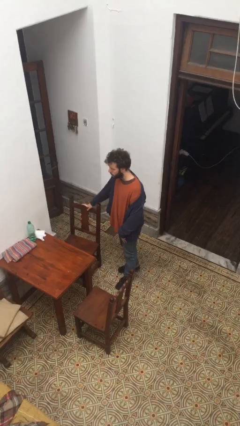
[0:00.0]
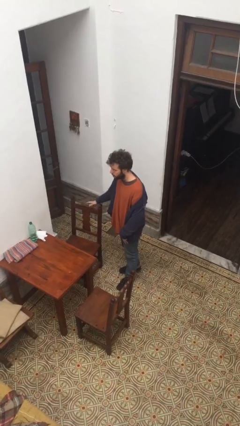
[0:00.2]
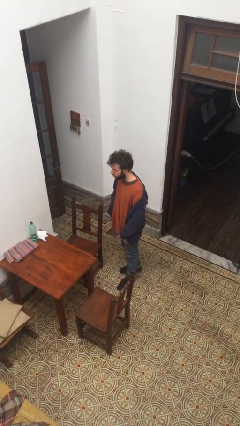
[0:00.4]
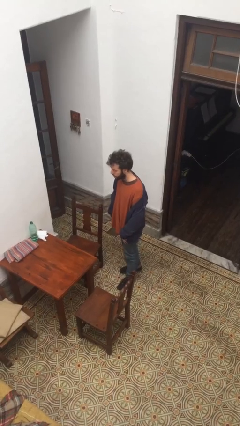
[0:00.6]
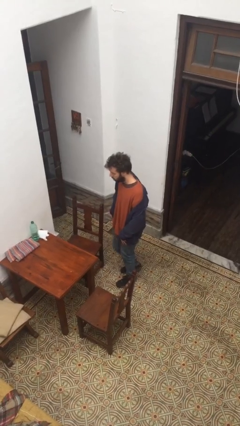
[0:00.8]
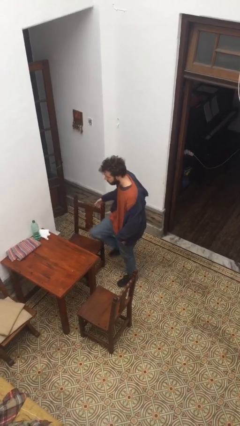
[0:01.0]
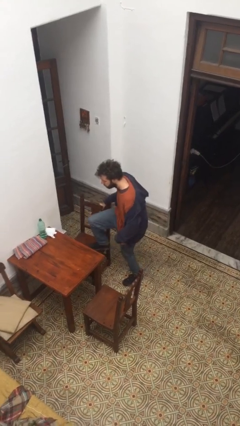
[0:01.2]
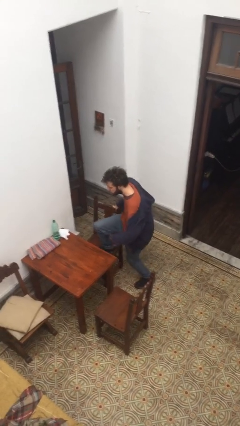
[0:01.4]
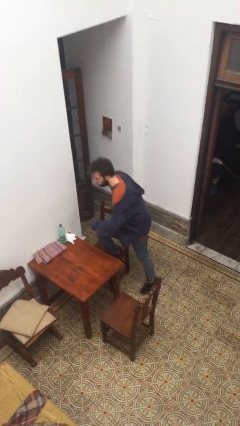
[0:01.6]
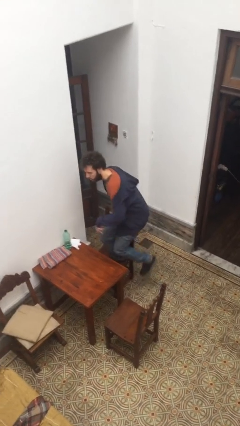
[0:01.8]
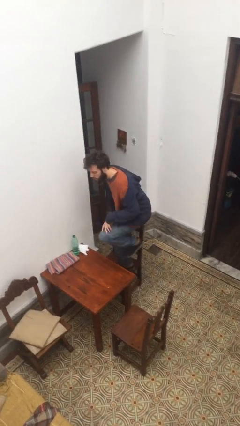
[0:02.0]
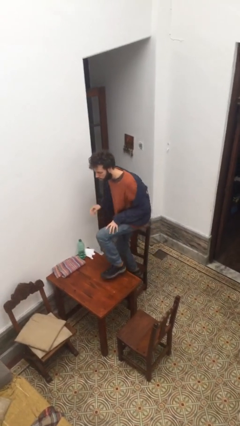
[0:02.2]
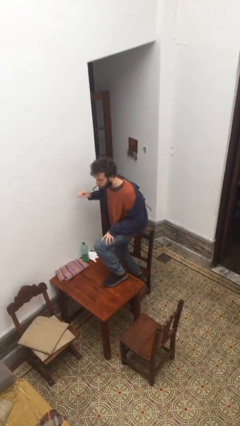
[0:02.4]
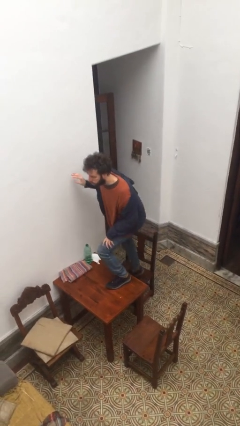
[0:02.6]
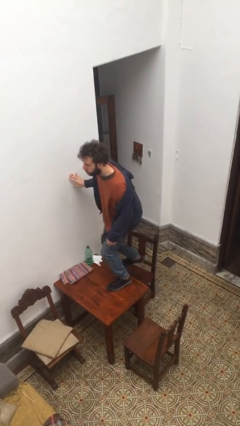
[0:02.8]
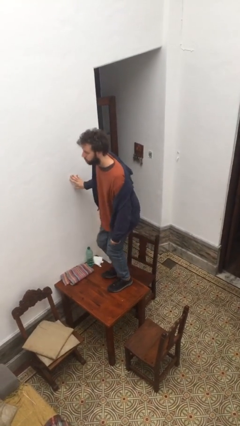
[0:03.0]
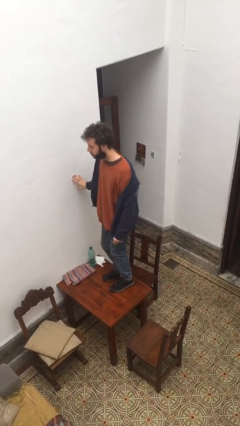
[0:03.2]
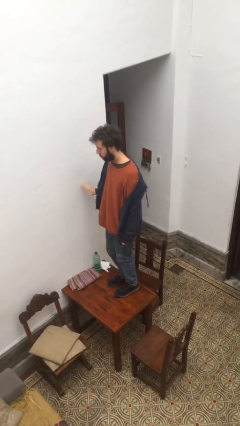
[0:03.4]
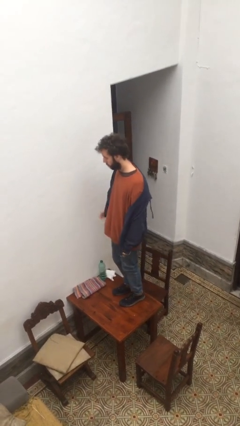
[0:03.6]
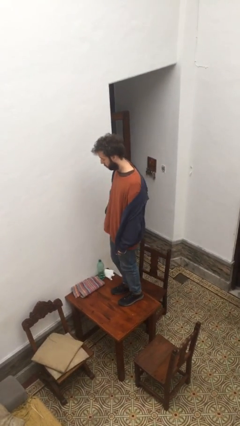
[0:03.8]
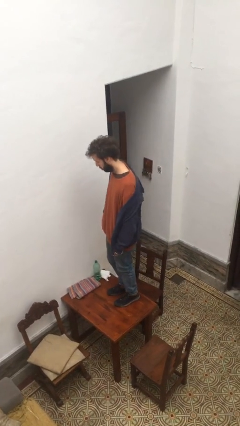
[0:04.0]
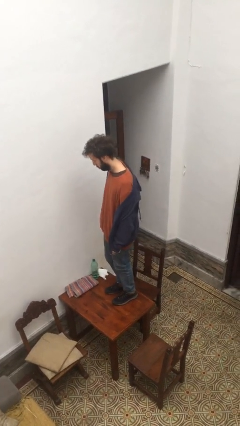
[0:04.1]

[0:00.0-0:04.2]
person climbs on table

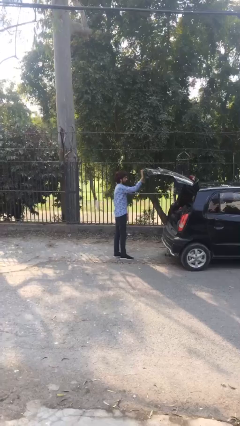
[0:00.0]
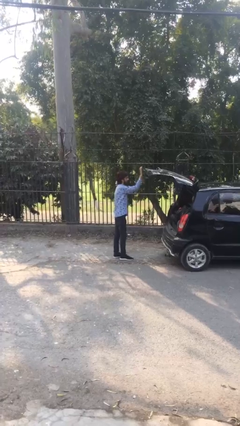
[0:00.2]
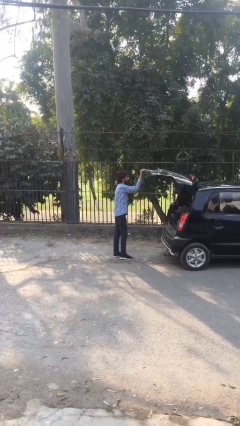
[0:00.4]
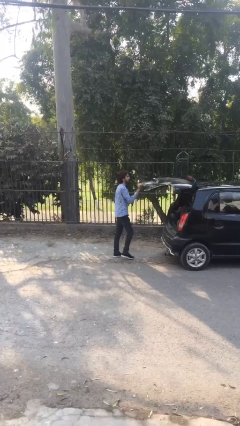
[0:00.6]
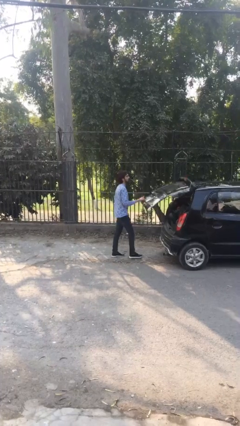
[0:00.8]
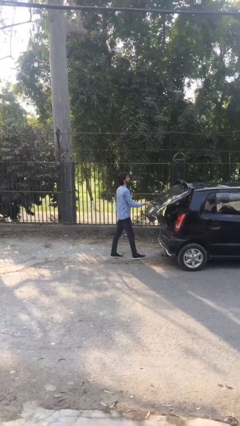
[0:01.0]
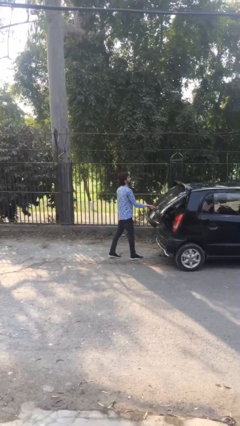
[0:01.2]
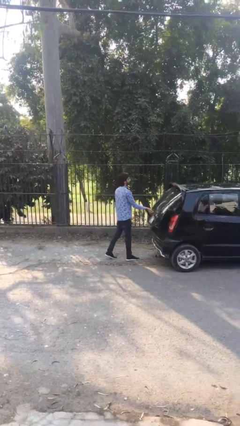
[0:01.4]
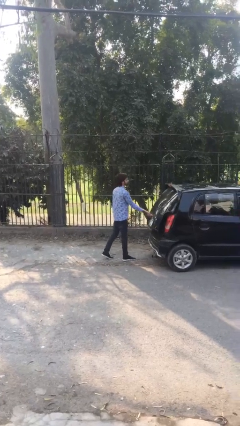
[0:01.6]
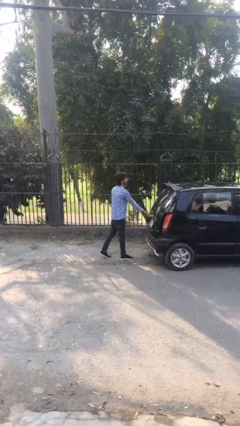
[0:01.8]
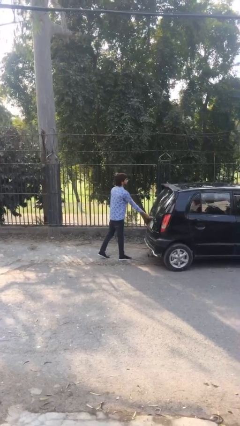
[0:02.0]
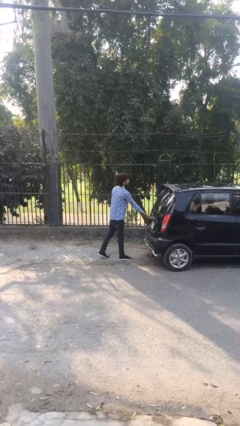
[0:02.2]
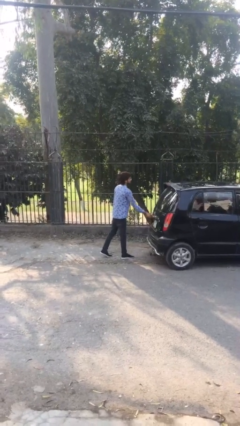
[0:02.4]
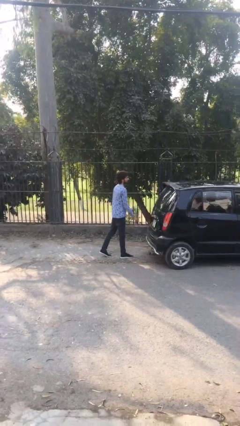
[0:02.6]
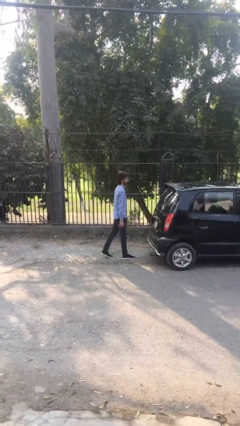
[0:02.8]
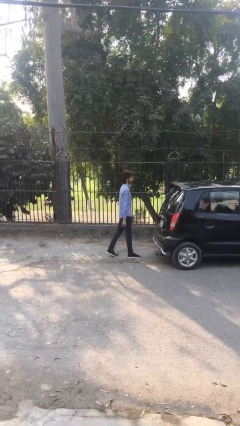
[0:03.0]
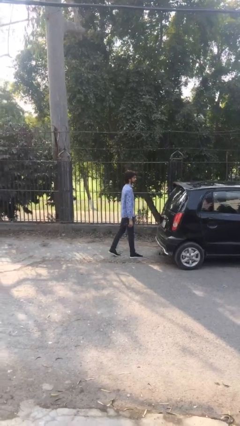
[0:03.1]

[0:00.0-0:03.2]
person closes car trunk

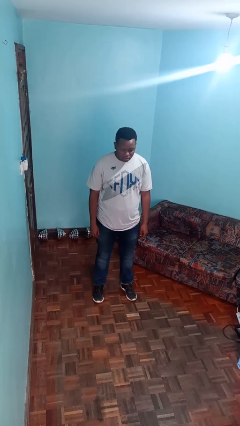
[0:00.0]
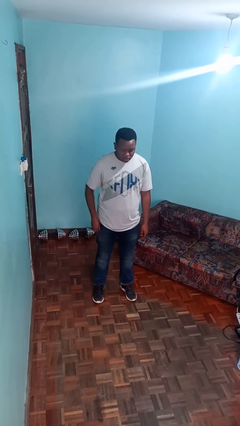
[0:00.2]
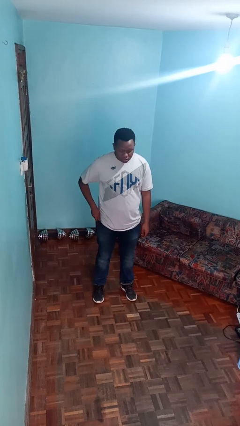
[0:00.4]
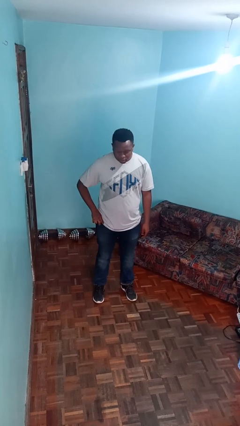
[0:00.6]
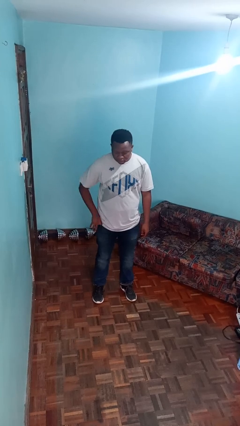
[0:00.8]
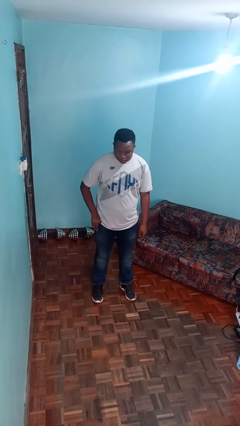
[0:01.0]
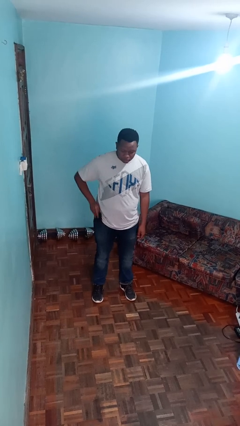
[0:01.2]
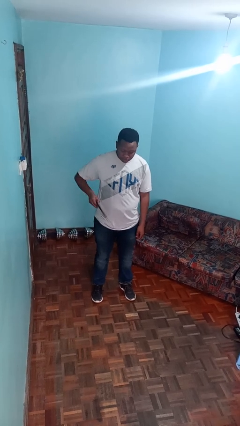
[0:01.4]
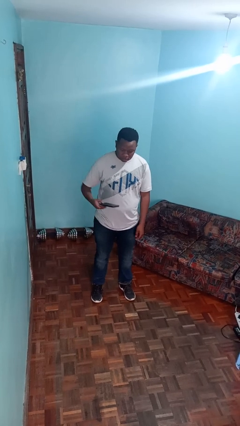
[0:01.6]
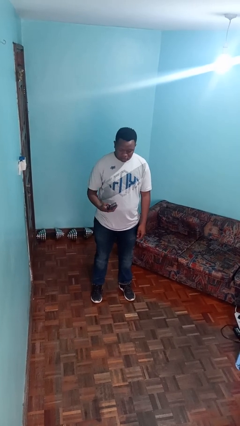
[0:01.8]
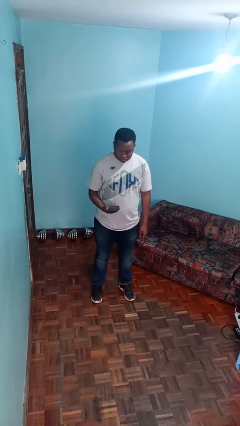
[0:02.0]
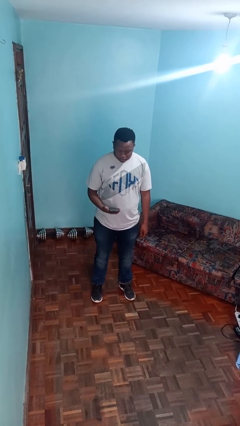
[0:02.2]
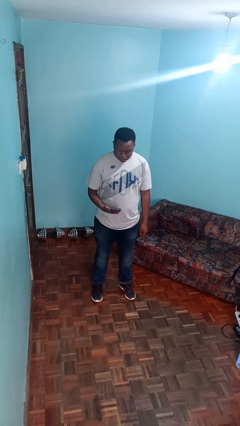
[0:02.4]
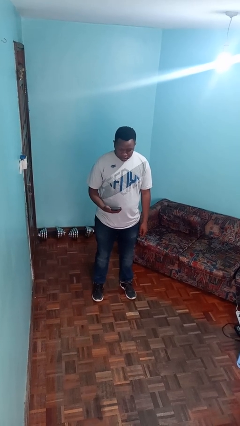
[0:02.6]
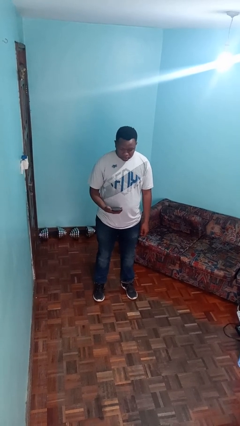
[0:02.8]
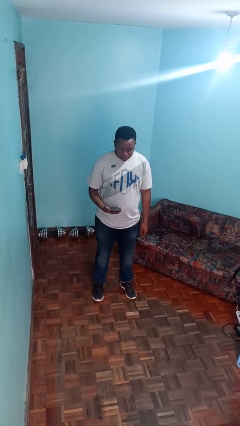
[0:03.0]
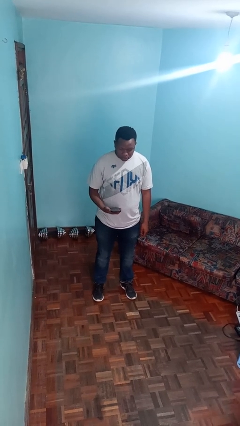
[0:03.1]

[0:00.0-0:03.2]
person takes phone from pocket

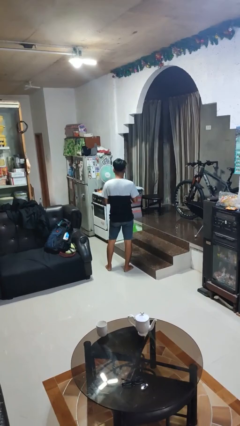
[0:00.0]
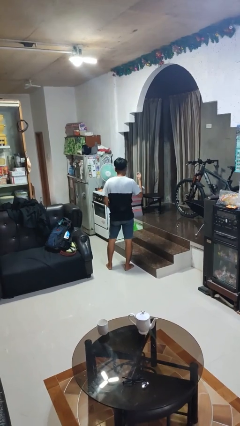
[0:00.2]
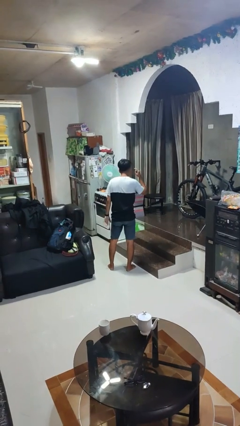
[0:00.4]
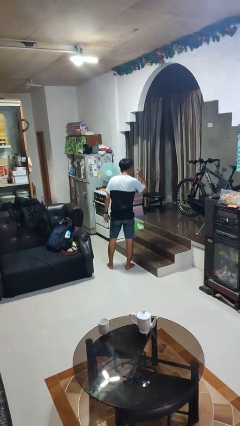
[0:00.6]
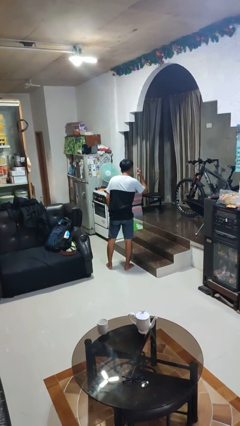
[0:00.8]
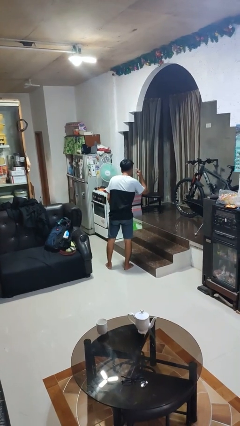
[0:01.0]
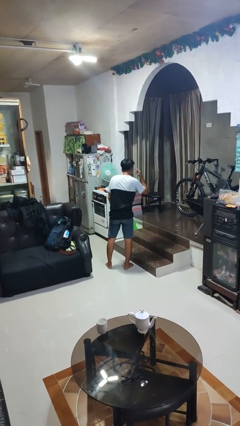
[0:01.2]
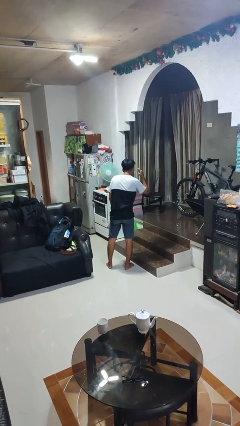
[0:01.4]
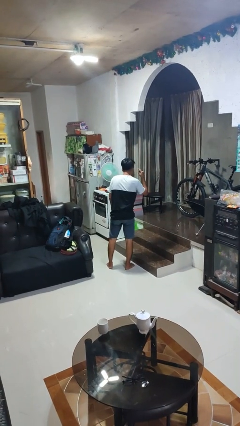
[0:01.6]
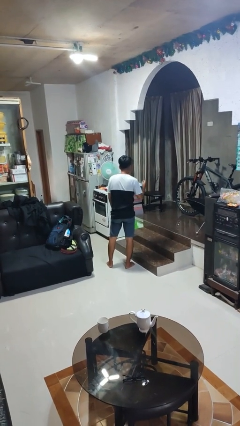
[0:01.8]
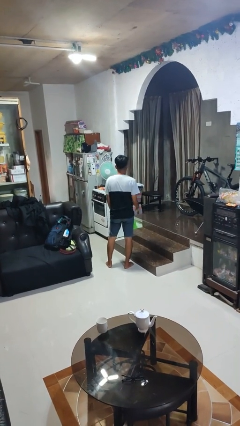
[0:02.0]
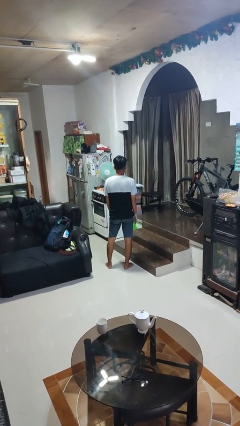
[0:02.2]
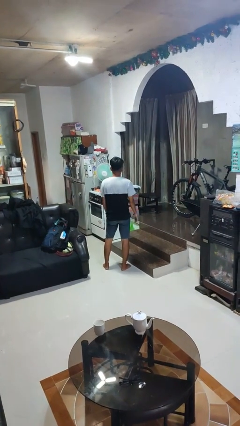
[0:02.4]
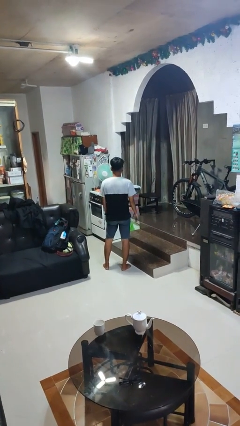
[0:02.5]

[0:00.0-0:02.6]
person gestures listen closely

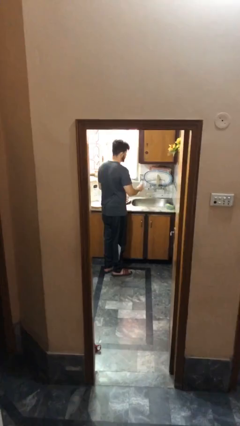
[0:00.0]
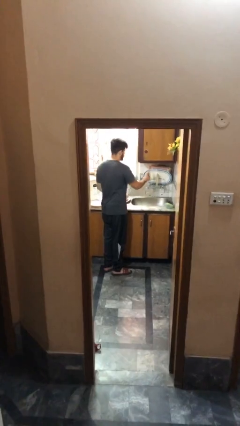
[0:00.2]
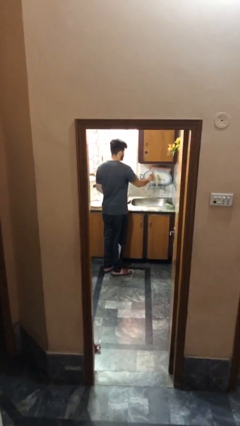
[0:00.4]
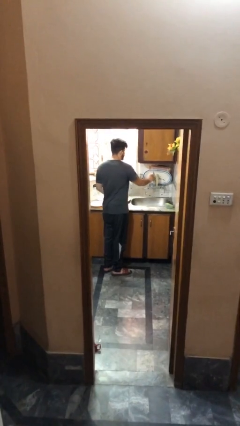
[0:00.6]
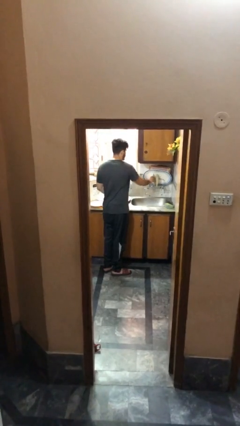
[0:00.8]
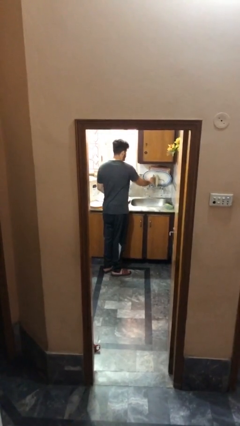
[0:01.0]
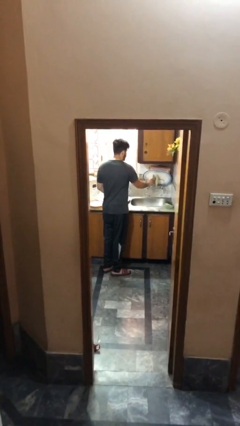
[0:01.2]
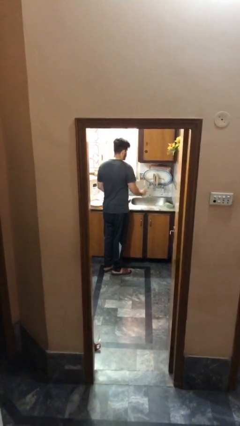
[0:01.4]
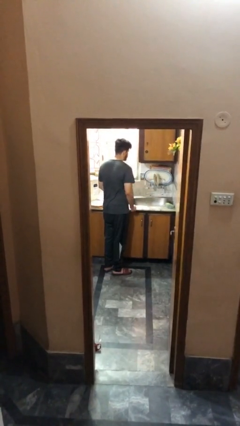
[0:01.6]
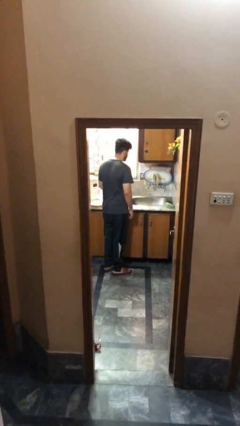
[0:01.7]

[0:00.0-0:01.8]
person loads dishwasher

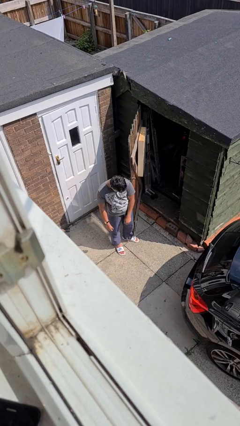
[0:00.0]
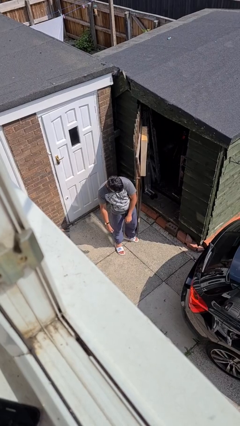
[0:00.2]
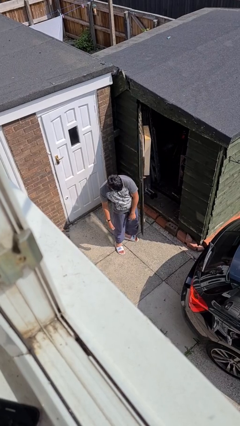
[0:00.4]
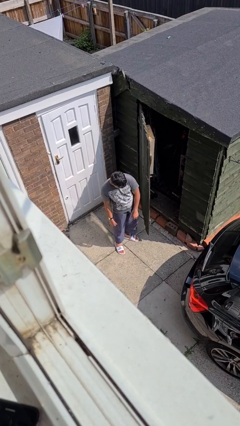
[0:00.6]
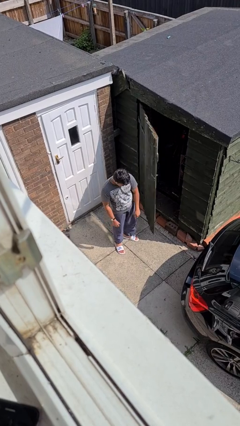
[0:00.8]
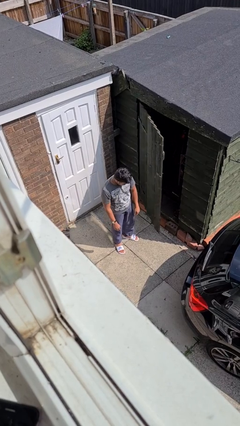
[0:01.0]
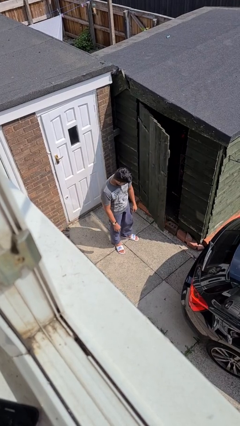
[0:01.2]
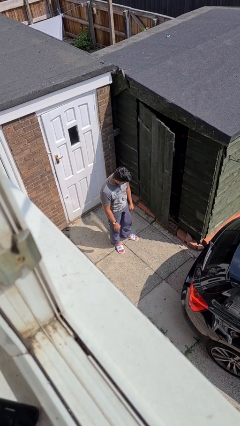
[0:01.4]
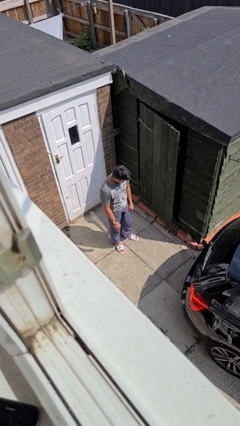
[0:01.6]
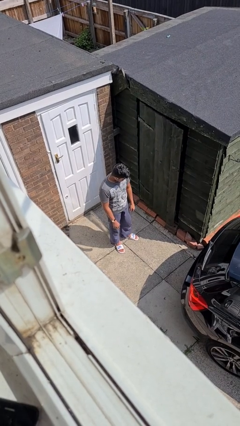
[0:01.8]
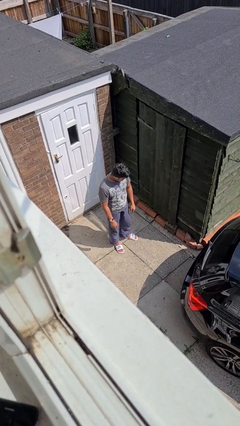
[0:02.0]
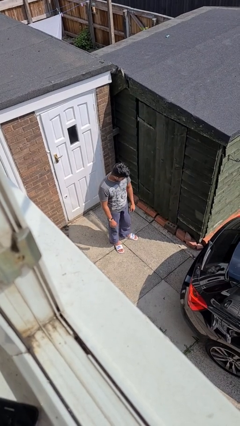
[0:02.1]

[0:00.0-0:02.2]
person closes door with hip

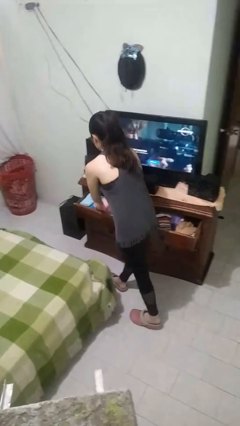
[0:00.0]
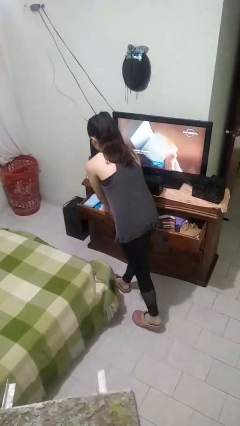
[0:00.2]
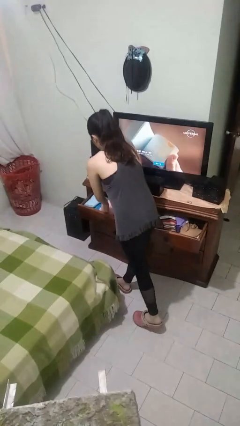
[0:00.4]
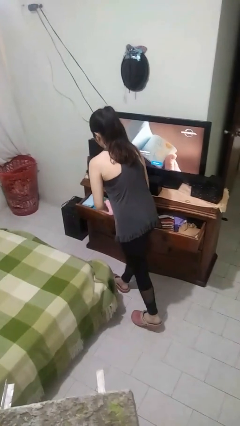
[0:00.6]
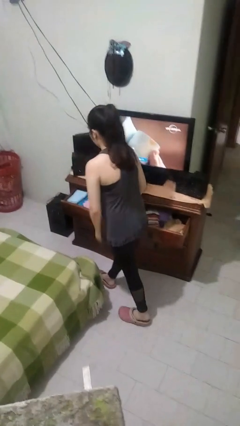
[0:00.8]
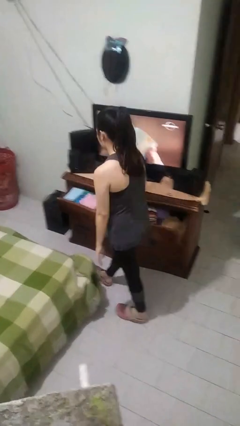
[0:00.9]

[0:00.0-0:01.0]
person puts clothes into dresser
